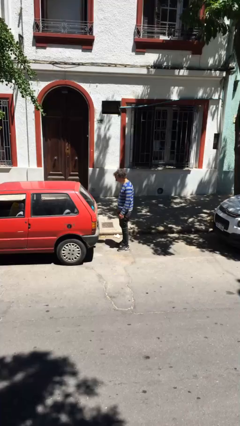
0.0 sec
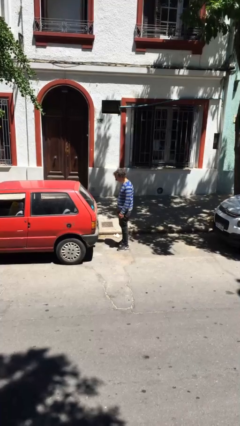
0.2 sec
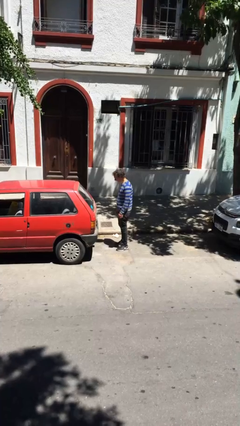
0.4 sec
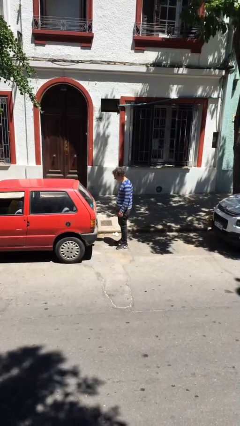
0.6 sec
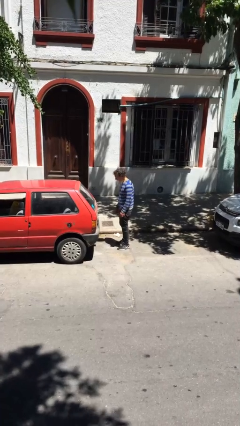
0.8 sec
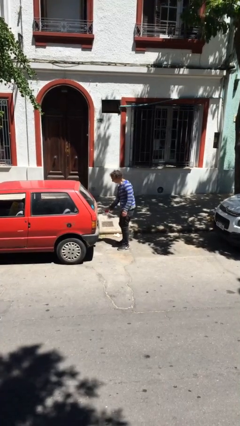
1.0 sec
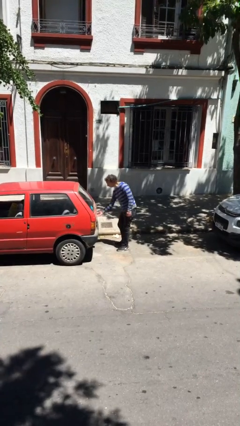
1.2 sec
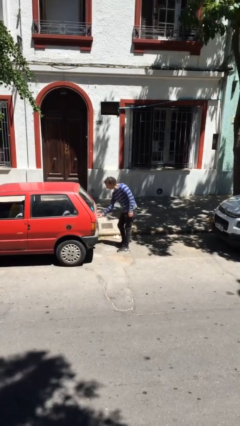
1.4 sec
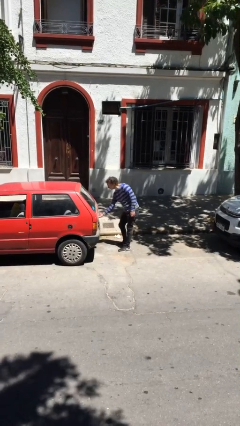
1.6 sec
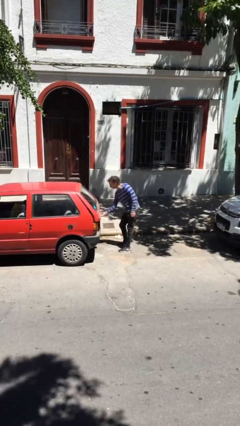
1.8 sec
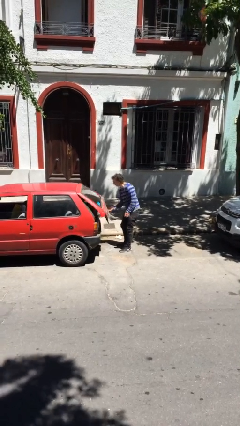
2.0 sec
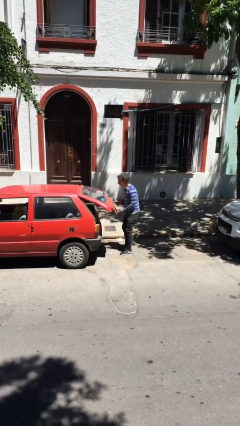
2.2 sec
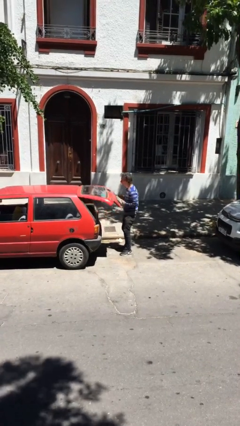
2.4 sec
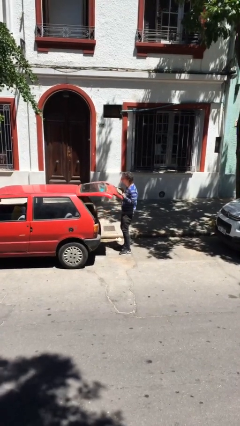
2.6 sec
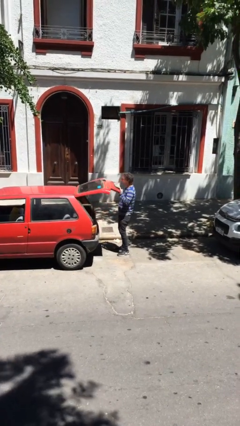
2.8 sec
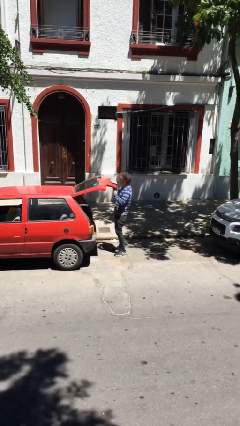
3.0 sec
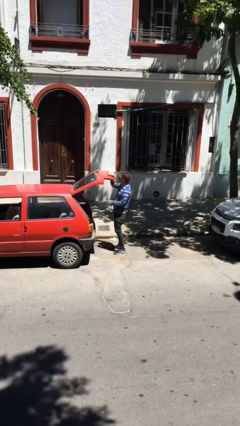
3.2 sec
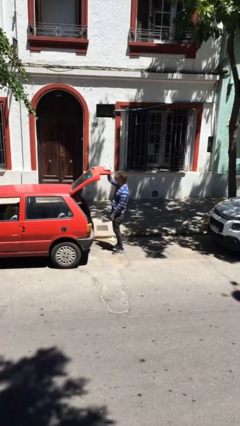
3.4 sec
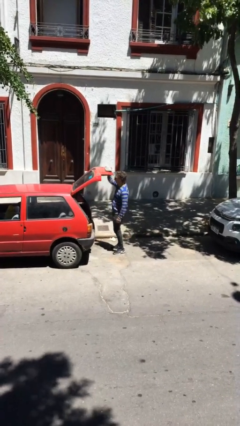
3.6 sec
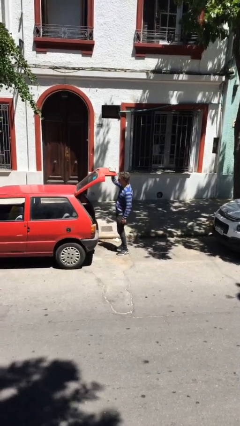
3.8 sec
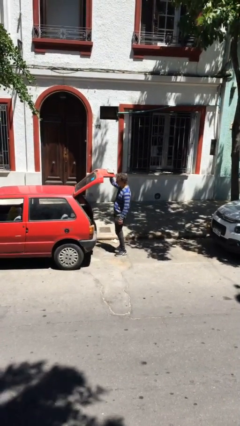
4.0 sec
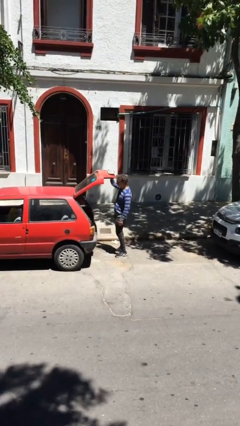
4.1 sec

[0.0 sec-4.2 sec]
person opens car trunk

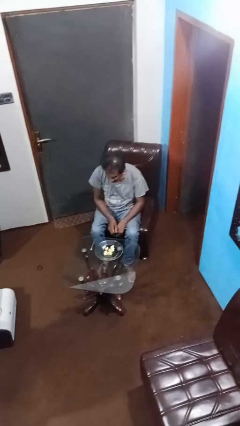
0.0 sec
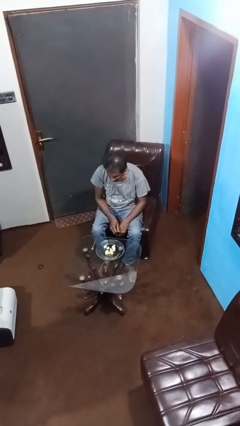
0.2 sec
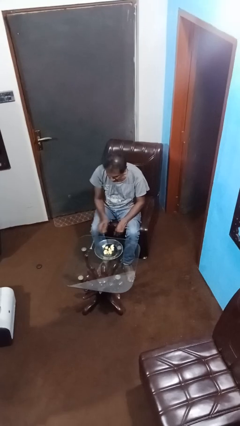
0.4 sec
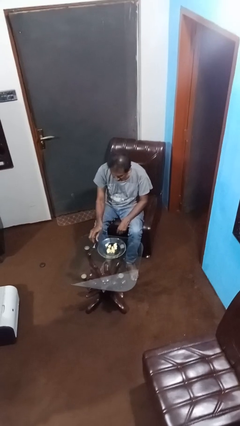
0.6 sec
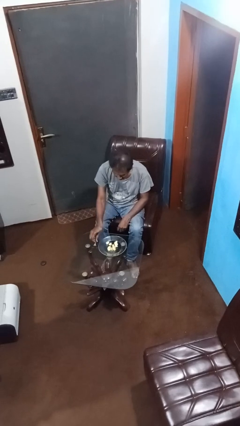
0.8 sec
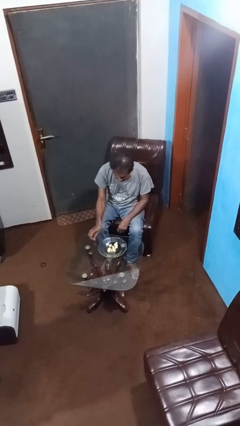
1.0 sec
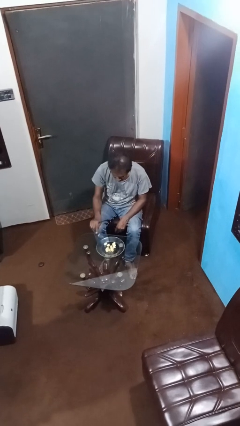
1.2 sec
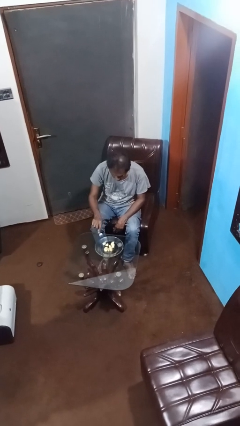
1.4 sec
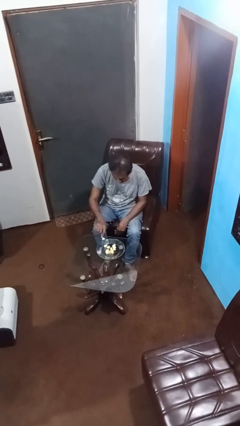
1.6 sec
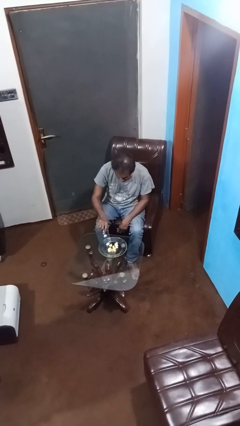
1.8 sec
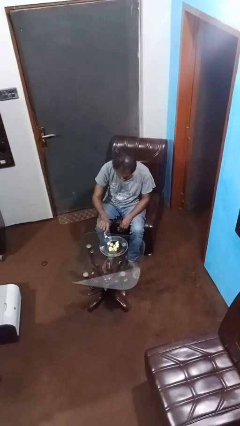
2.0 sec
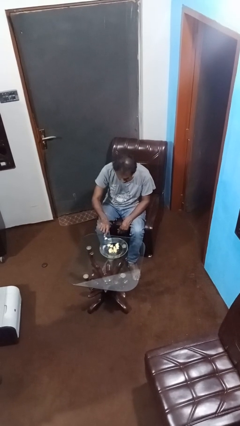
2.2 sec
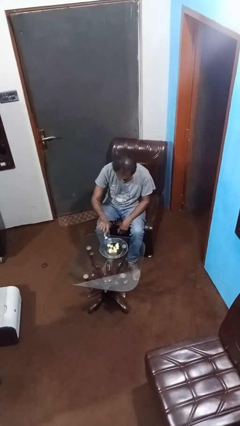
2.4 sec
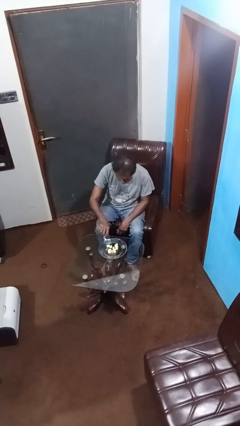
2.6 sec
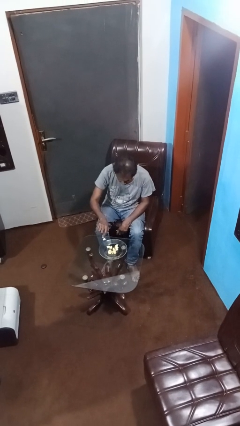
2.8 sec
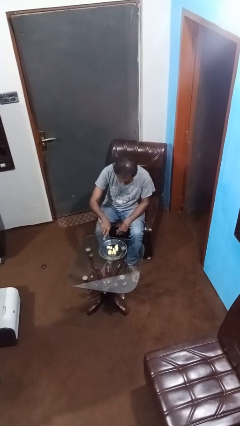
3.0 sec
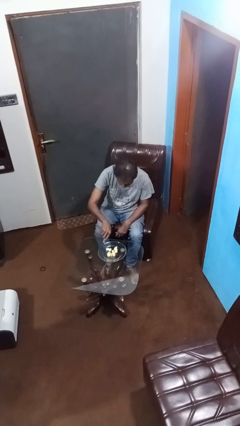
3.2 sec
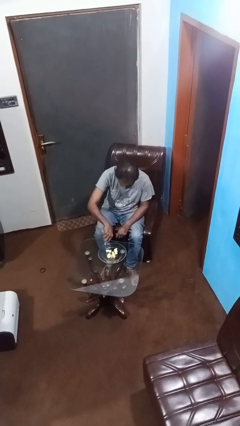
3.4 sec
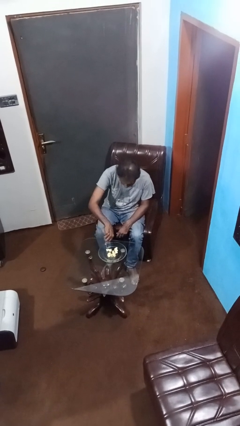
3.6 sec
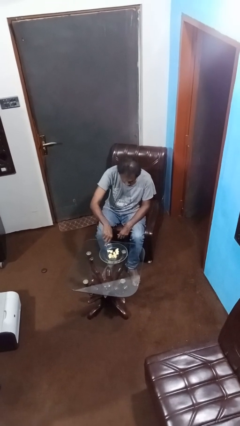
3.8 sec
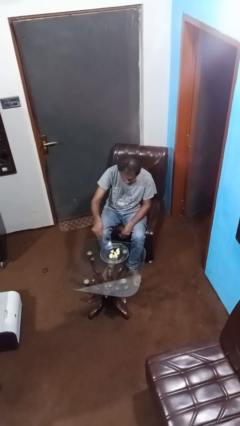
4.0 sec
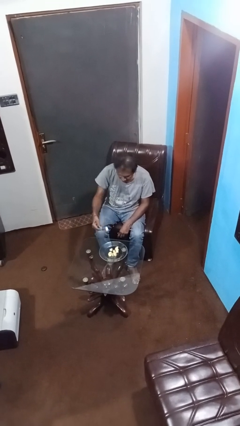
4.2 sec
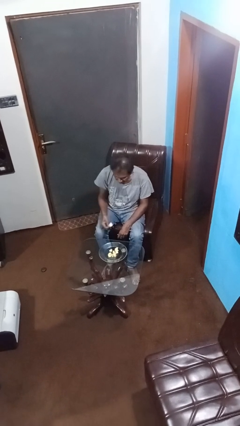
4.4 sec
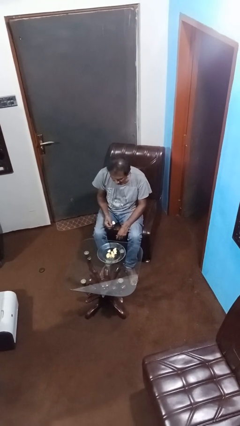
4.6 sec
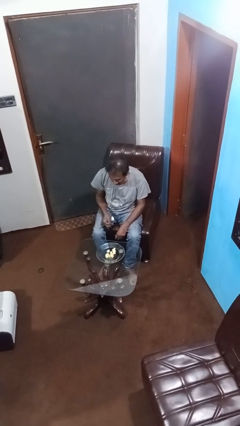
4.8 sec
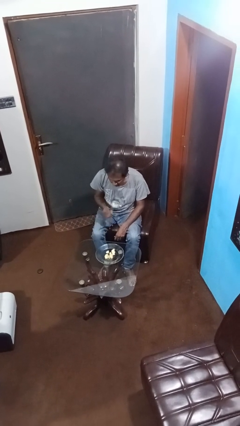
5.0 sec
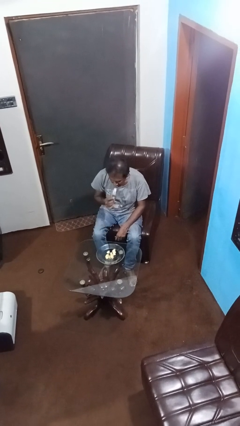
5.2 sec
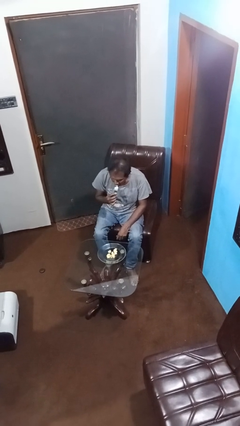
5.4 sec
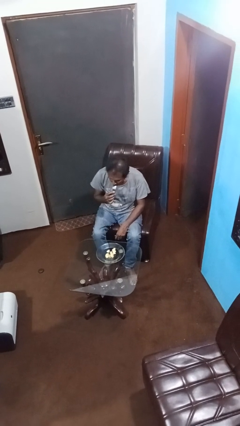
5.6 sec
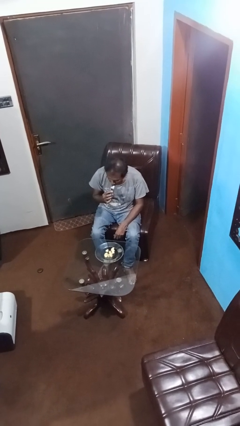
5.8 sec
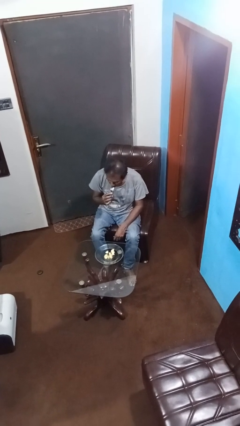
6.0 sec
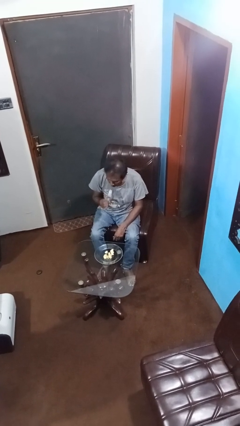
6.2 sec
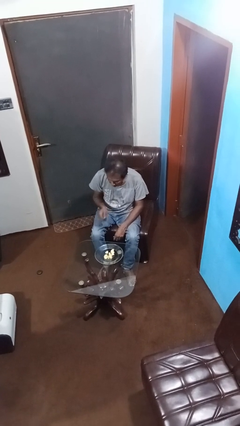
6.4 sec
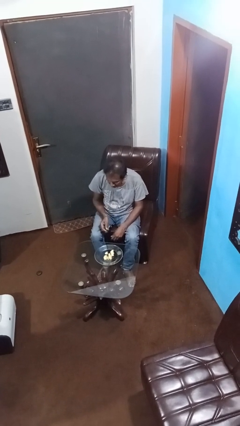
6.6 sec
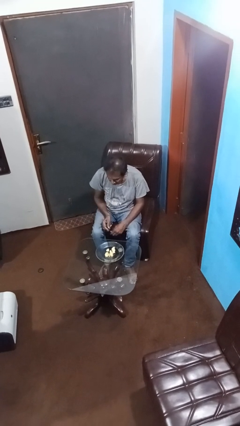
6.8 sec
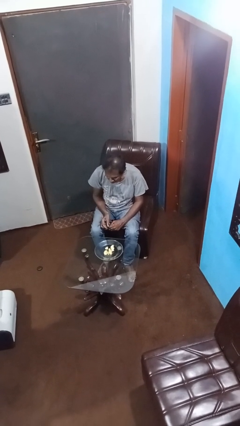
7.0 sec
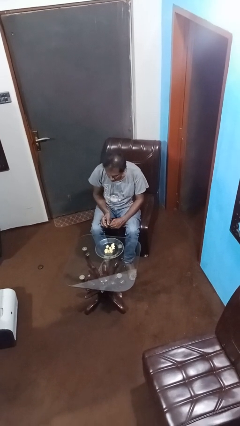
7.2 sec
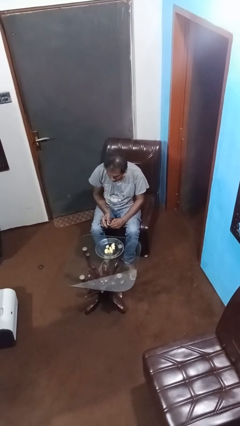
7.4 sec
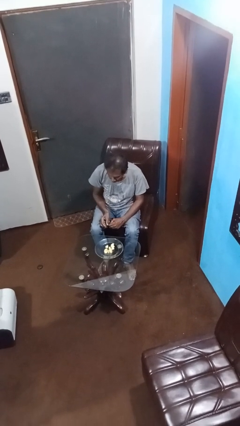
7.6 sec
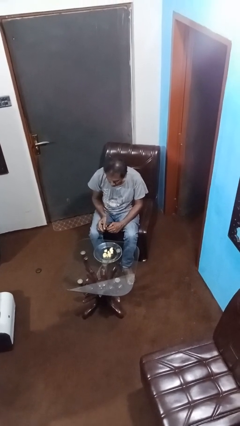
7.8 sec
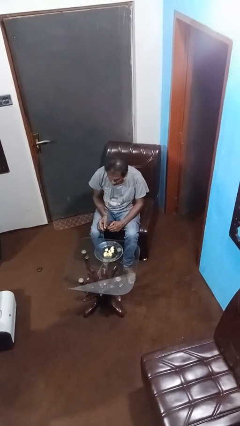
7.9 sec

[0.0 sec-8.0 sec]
person eats with utensil

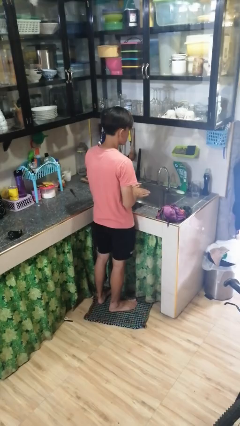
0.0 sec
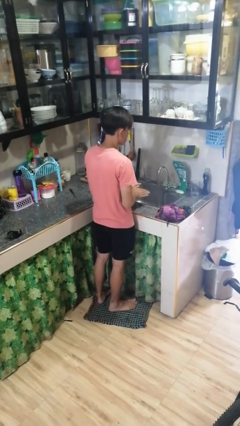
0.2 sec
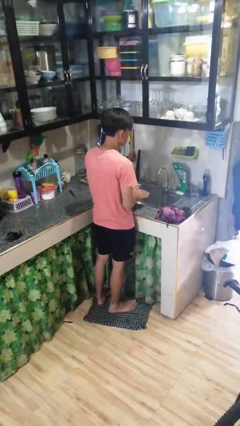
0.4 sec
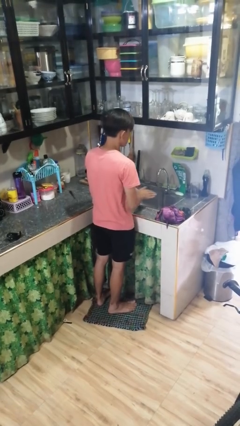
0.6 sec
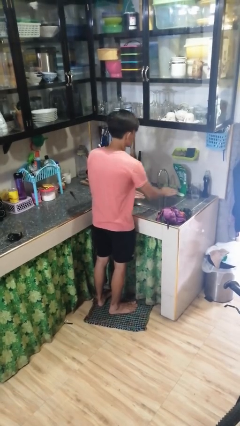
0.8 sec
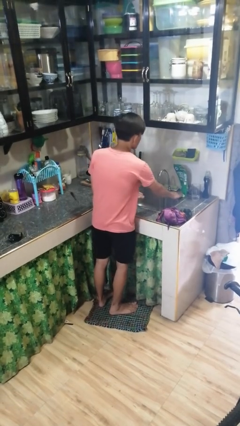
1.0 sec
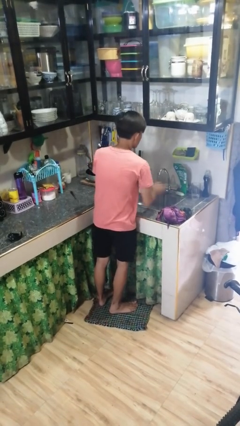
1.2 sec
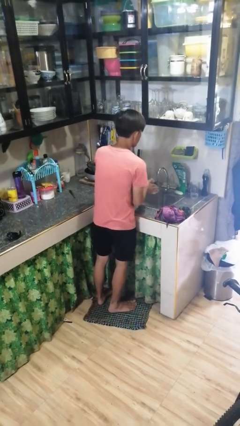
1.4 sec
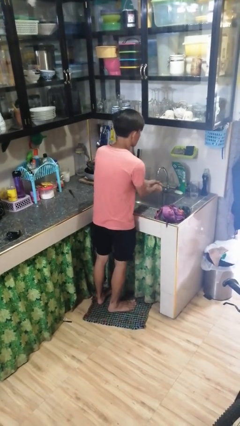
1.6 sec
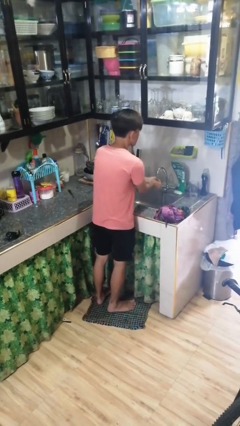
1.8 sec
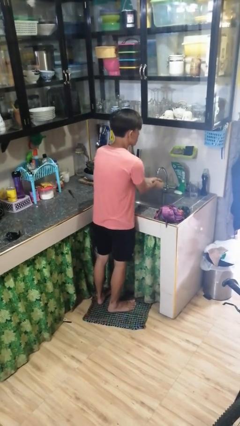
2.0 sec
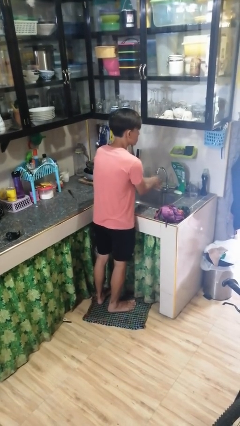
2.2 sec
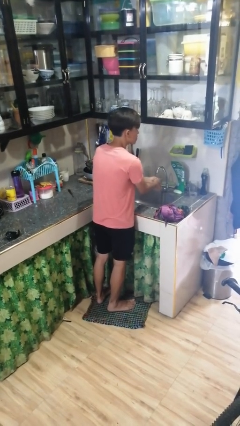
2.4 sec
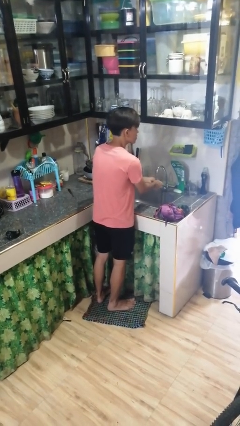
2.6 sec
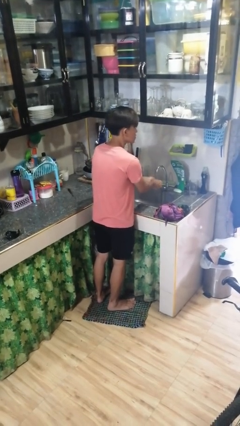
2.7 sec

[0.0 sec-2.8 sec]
person washes hands

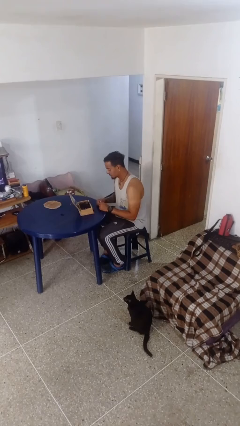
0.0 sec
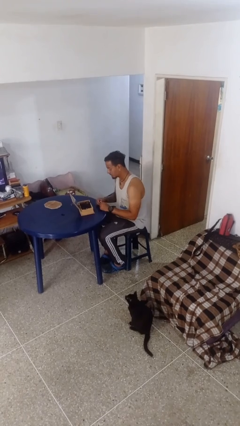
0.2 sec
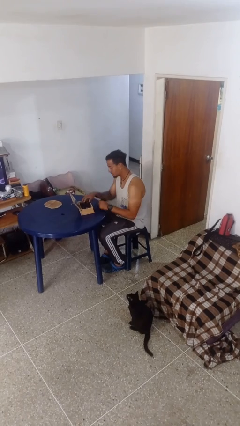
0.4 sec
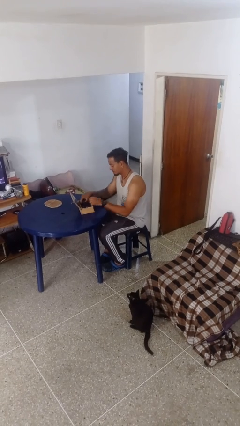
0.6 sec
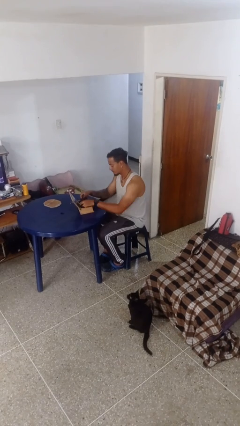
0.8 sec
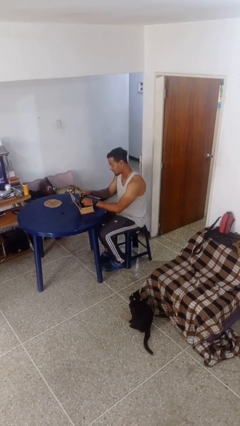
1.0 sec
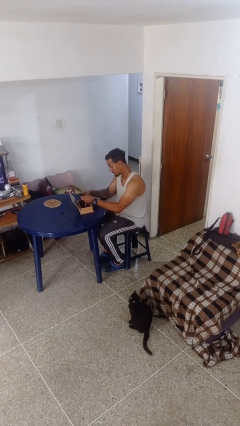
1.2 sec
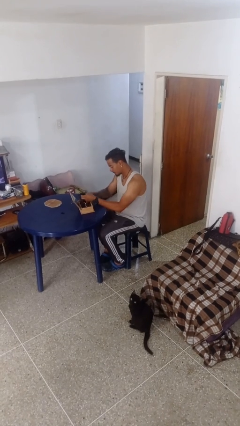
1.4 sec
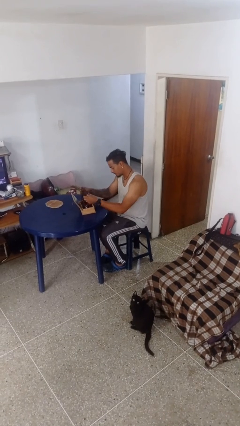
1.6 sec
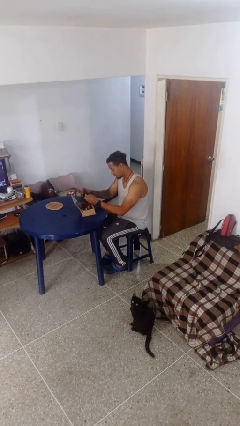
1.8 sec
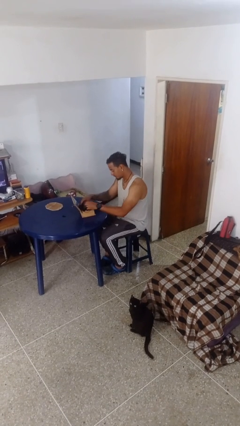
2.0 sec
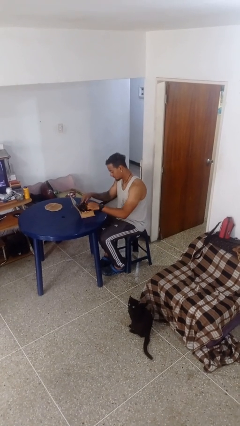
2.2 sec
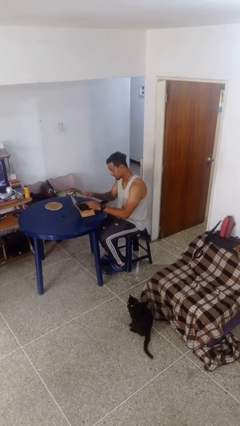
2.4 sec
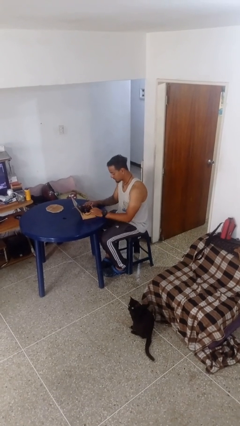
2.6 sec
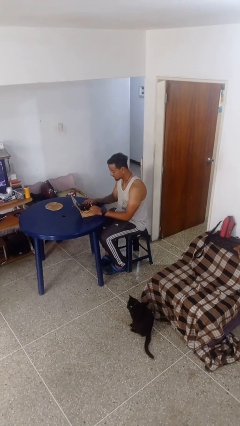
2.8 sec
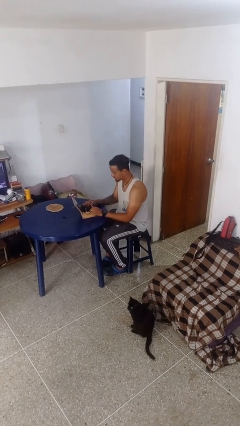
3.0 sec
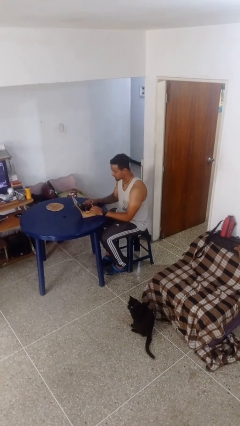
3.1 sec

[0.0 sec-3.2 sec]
person searches jewelry box
